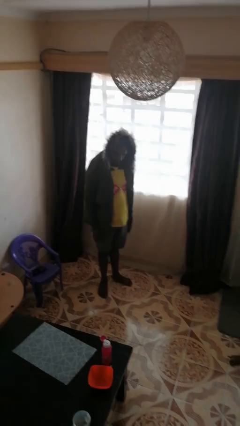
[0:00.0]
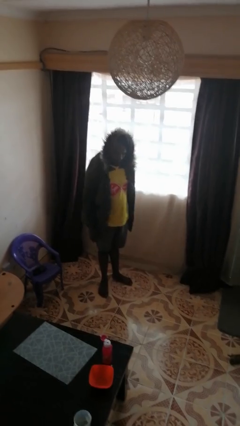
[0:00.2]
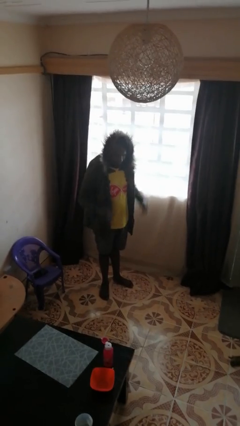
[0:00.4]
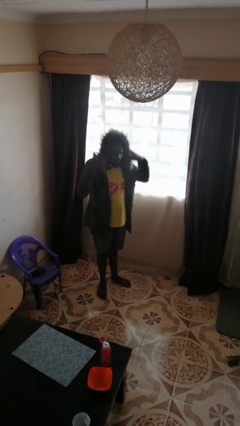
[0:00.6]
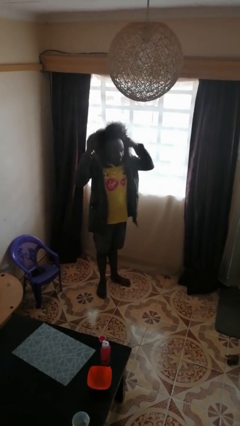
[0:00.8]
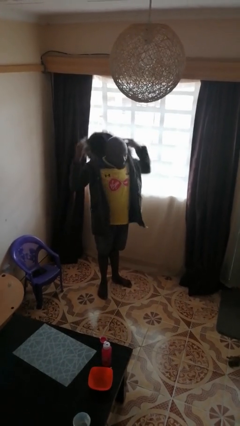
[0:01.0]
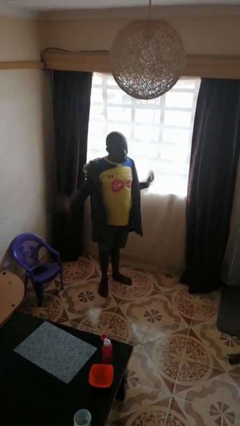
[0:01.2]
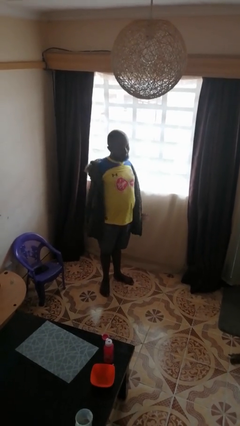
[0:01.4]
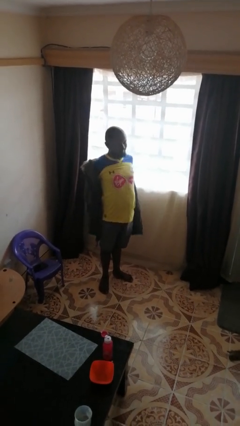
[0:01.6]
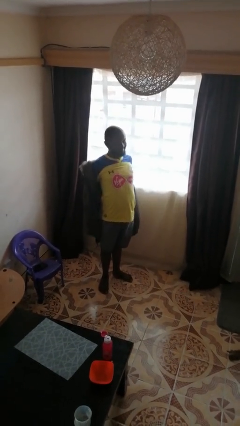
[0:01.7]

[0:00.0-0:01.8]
person takes off hoodie

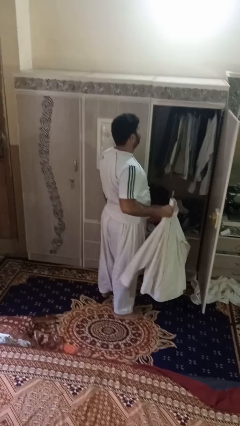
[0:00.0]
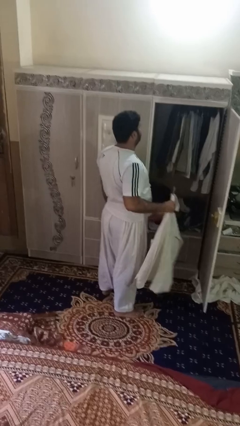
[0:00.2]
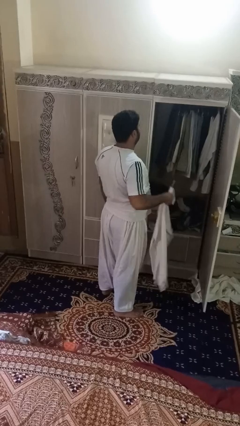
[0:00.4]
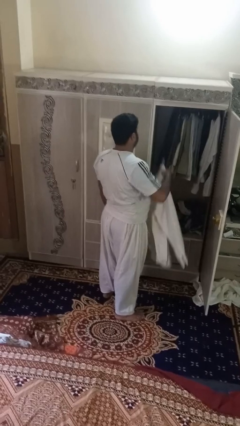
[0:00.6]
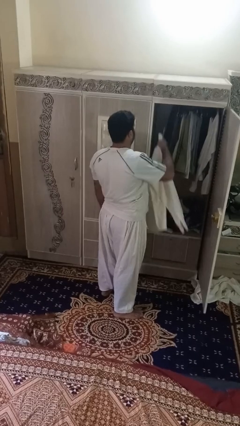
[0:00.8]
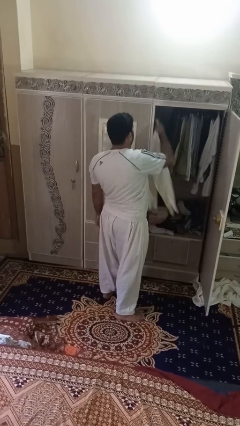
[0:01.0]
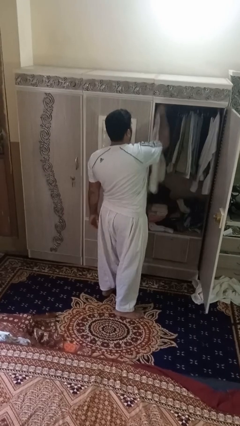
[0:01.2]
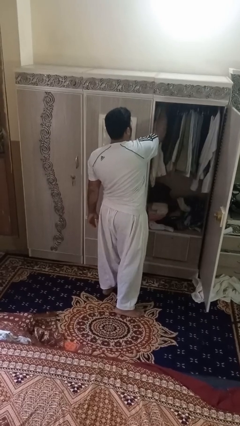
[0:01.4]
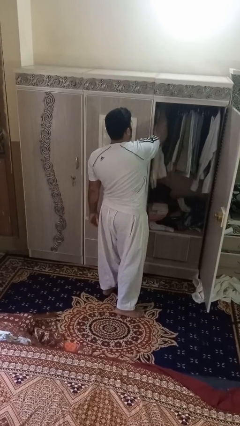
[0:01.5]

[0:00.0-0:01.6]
person puts clothes into closet

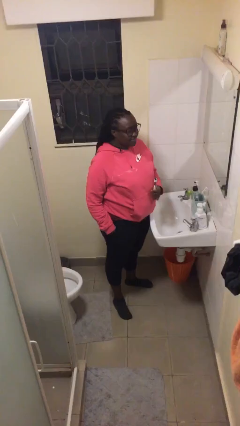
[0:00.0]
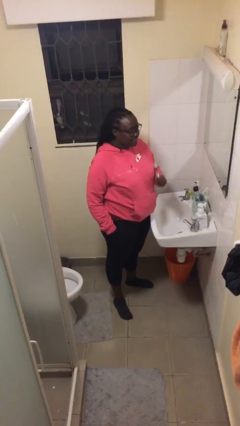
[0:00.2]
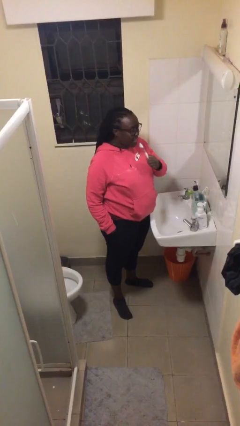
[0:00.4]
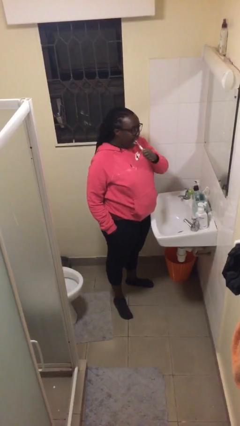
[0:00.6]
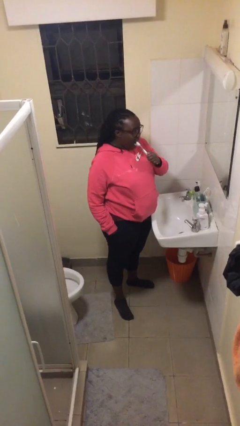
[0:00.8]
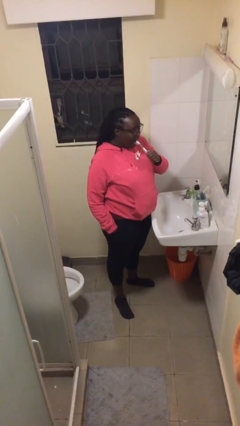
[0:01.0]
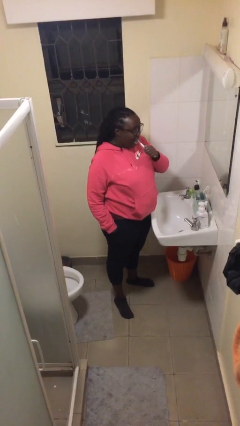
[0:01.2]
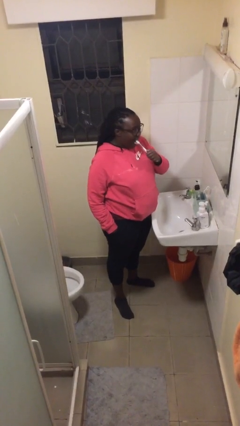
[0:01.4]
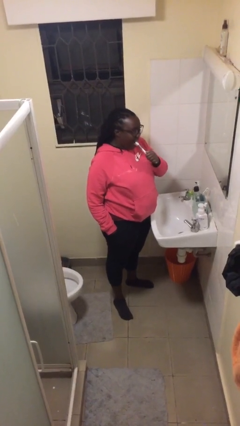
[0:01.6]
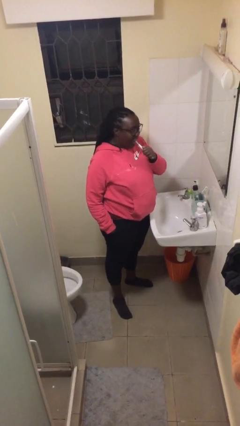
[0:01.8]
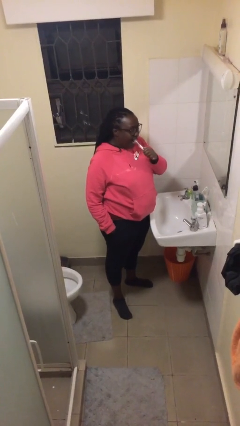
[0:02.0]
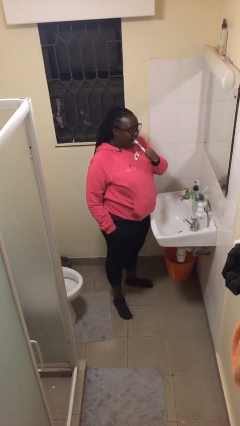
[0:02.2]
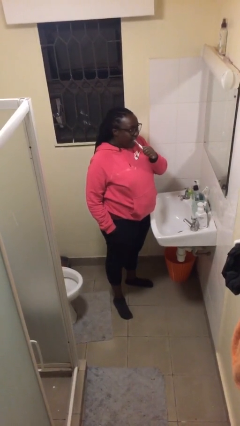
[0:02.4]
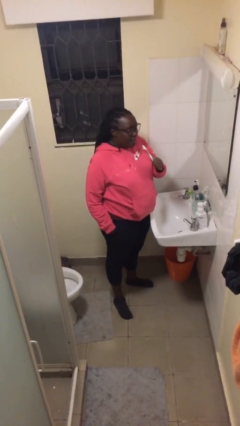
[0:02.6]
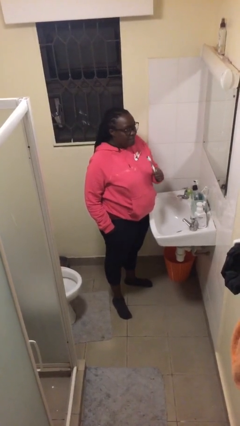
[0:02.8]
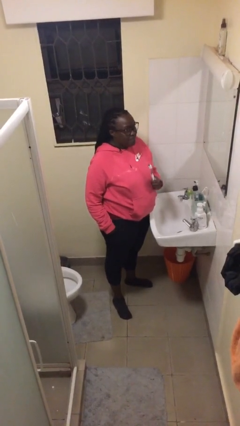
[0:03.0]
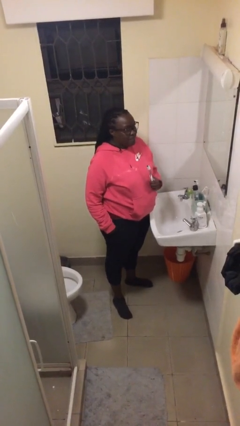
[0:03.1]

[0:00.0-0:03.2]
person brushes teeth

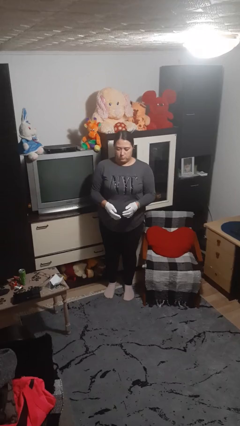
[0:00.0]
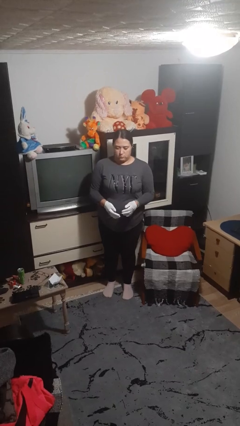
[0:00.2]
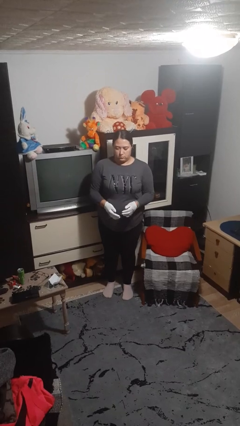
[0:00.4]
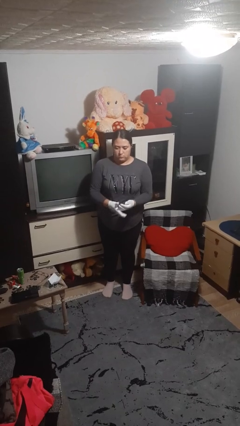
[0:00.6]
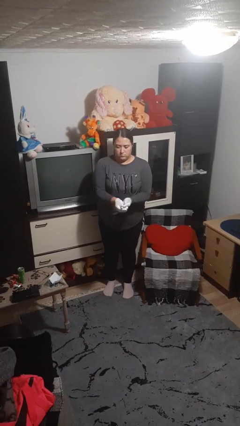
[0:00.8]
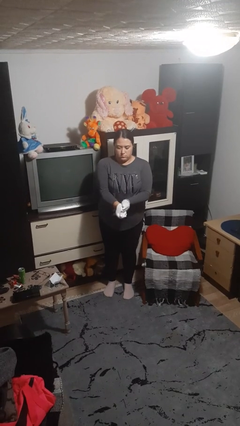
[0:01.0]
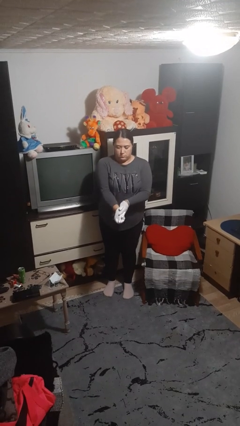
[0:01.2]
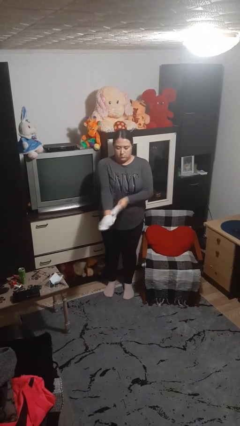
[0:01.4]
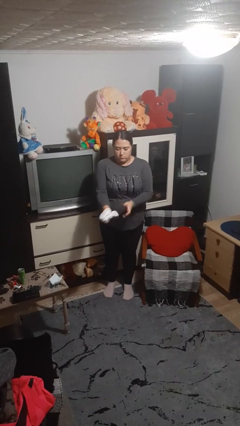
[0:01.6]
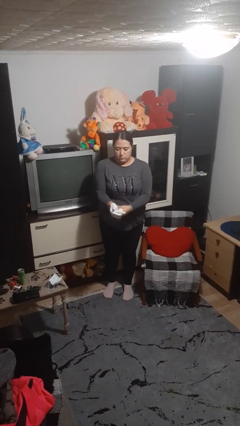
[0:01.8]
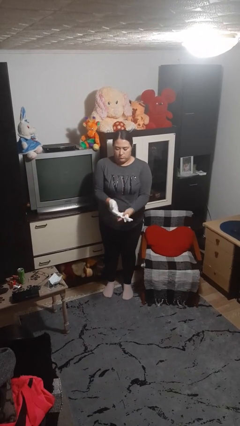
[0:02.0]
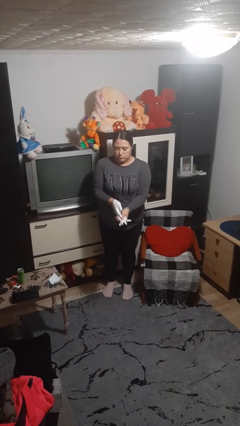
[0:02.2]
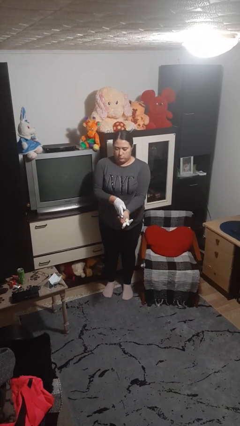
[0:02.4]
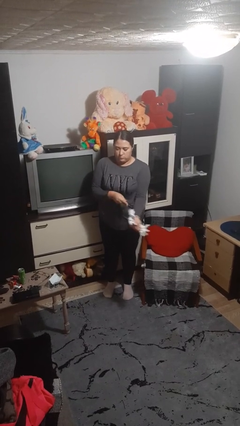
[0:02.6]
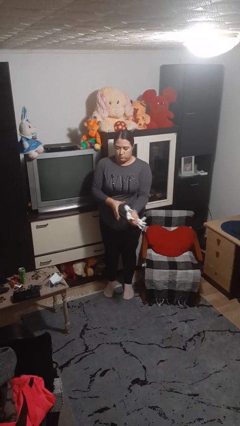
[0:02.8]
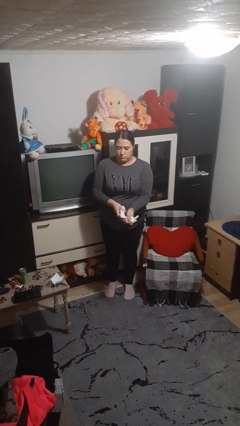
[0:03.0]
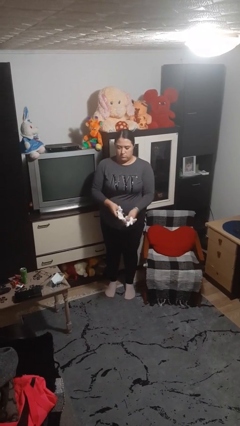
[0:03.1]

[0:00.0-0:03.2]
person takes off gloves

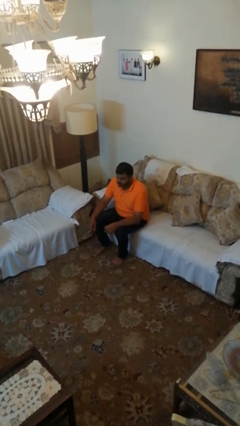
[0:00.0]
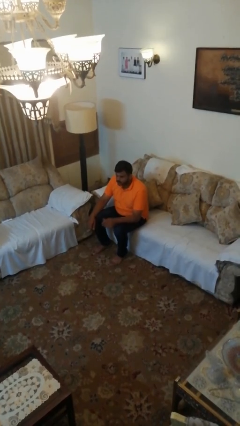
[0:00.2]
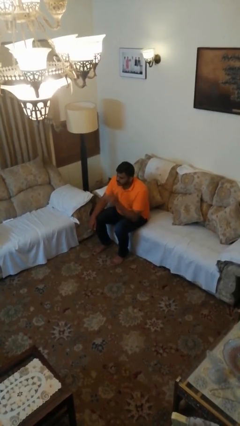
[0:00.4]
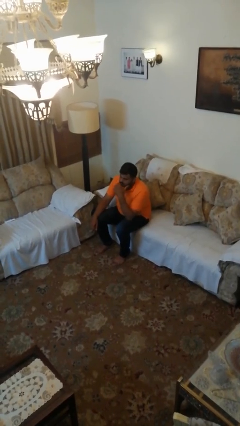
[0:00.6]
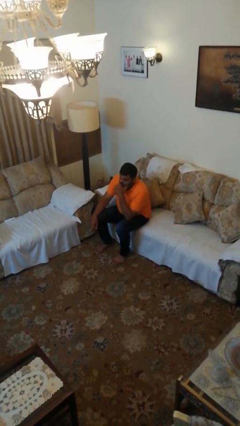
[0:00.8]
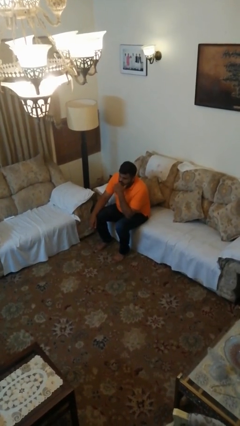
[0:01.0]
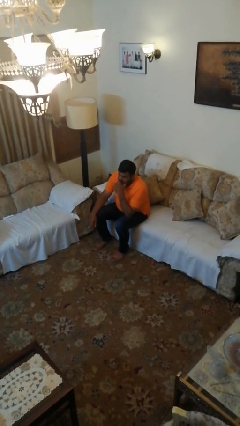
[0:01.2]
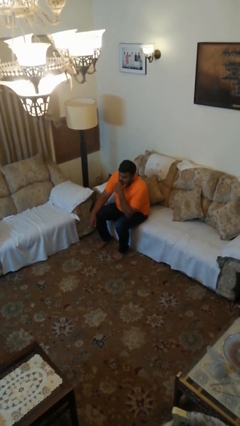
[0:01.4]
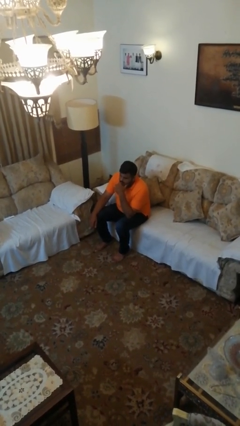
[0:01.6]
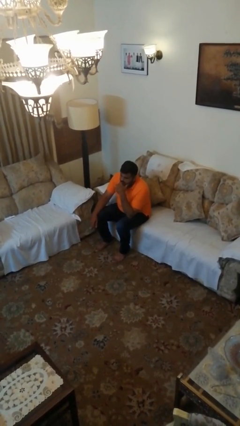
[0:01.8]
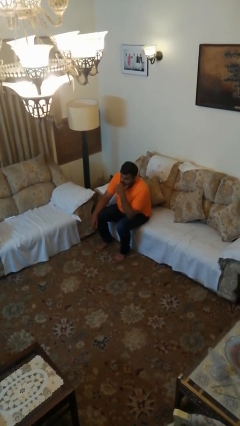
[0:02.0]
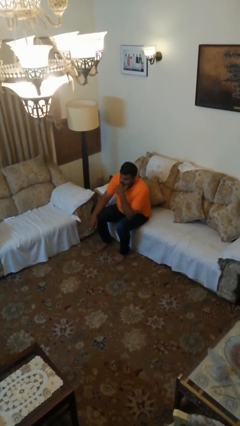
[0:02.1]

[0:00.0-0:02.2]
person strokes chin

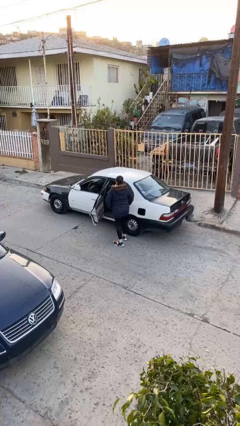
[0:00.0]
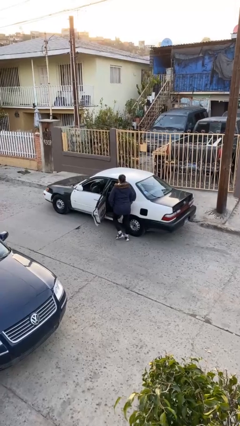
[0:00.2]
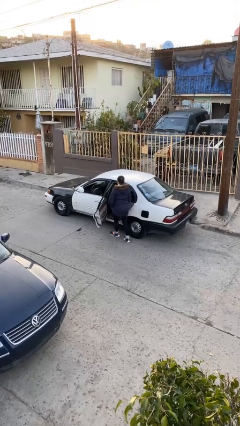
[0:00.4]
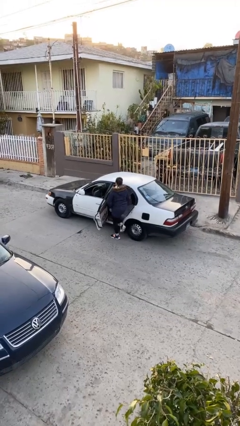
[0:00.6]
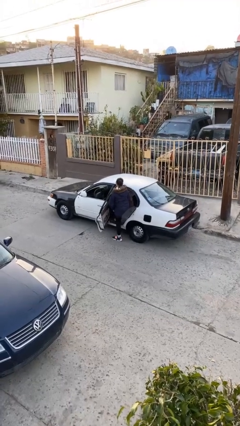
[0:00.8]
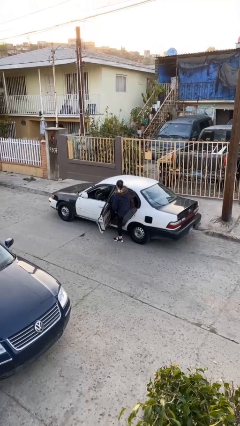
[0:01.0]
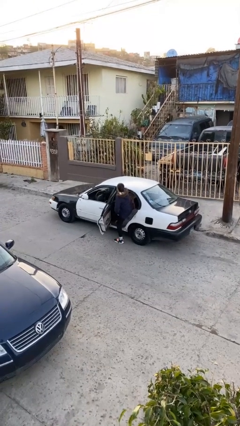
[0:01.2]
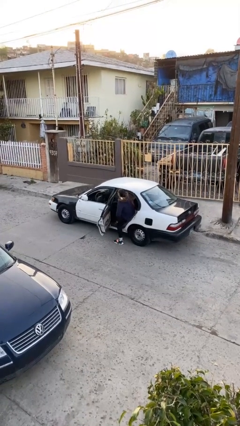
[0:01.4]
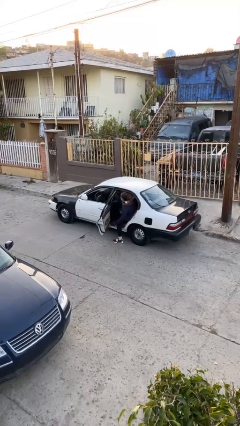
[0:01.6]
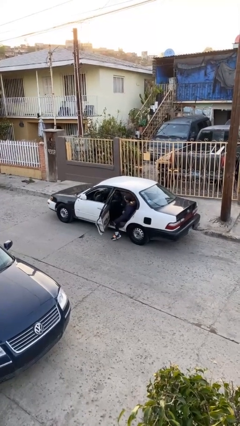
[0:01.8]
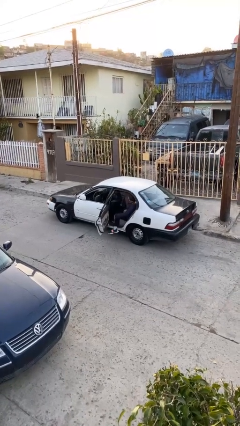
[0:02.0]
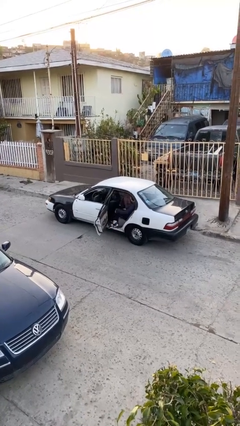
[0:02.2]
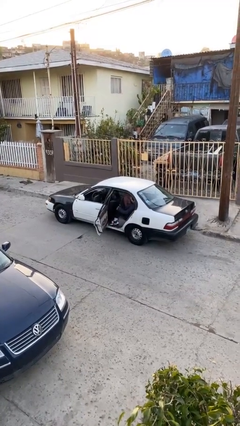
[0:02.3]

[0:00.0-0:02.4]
person enters car

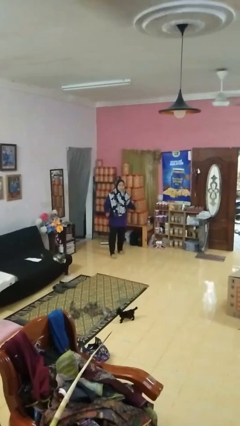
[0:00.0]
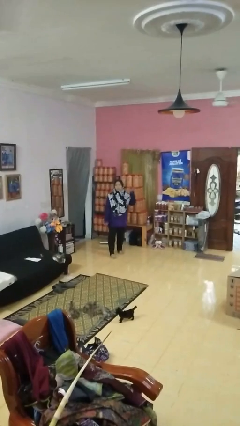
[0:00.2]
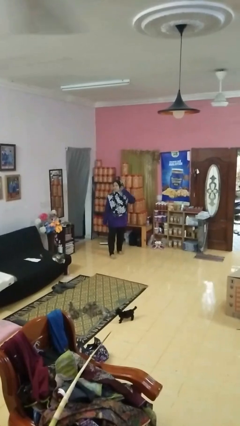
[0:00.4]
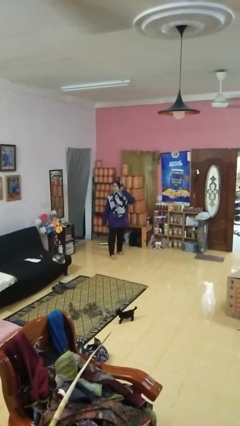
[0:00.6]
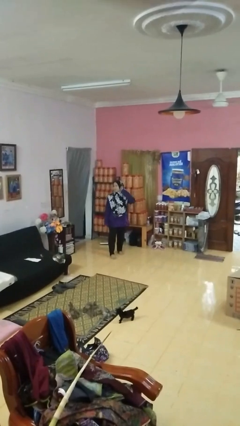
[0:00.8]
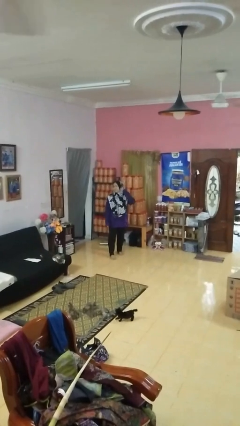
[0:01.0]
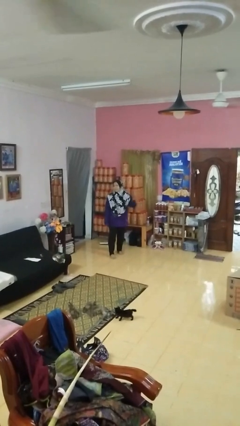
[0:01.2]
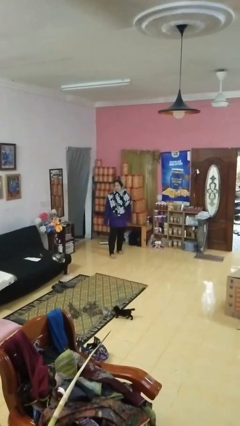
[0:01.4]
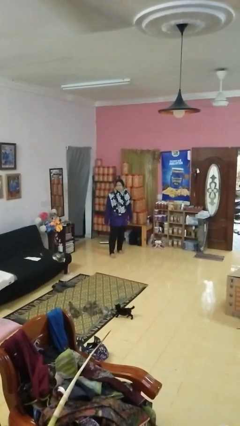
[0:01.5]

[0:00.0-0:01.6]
person gestures listen closely

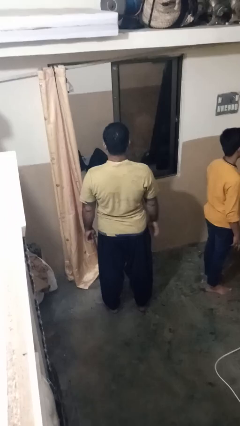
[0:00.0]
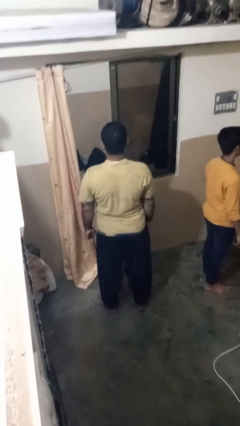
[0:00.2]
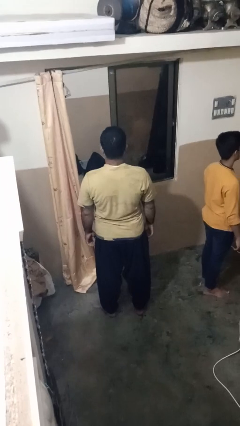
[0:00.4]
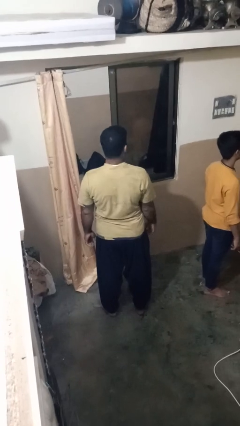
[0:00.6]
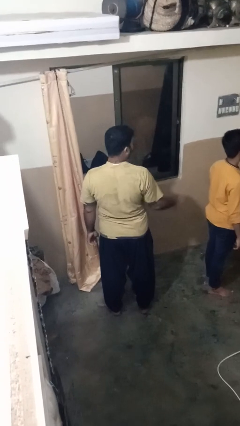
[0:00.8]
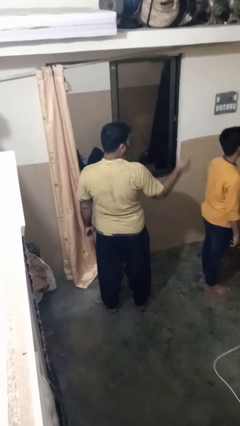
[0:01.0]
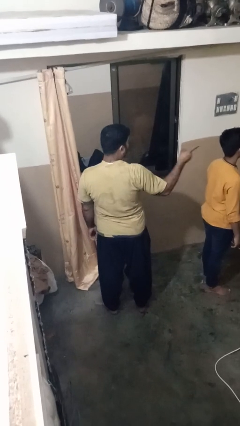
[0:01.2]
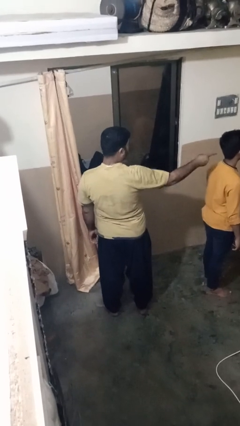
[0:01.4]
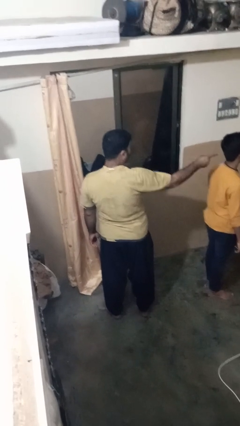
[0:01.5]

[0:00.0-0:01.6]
person points at person
